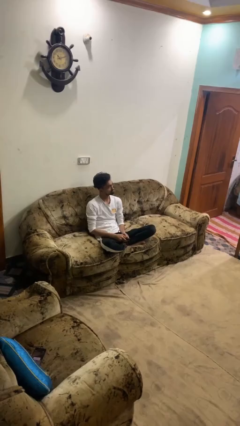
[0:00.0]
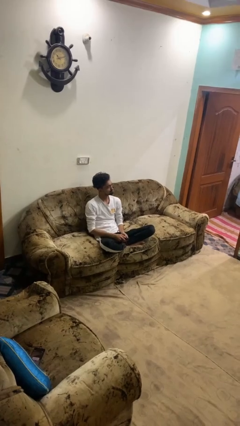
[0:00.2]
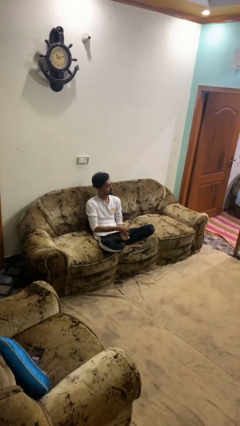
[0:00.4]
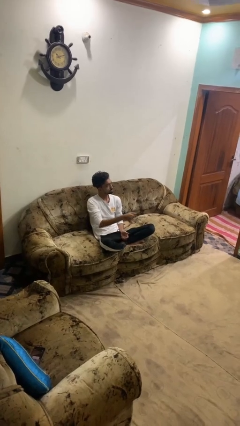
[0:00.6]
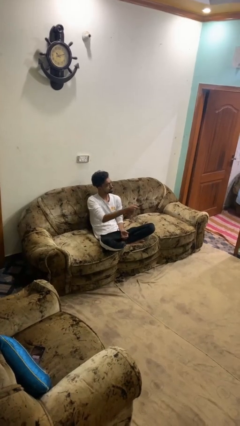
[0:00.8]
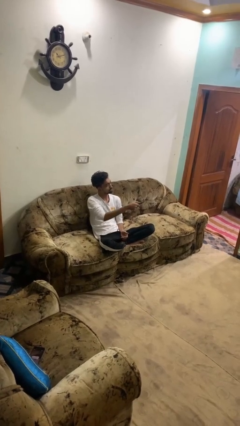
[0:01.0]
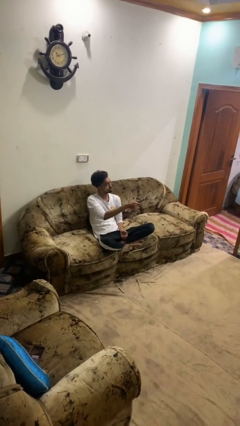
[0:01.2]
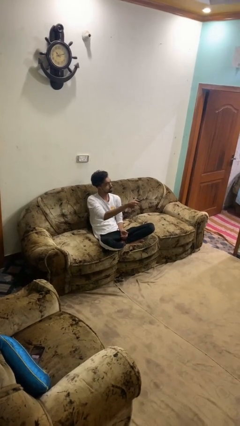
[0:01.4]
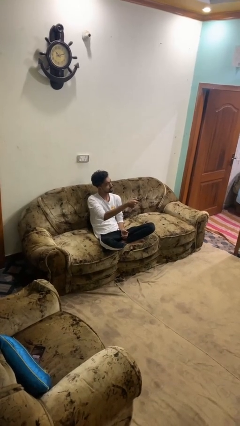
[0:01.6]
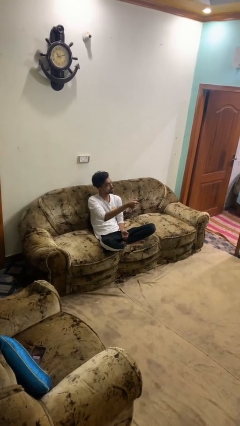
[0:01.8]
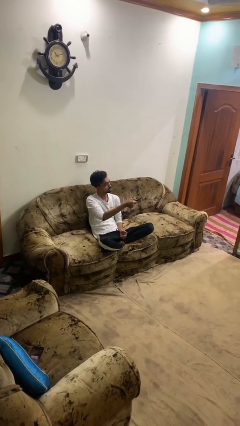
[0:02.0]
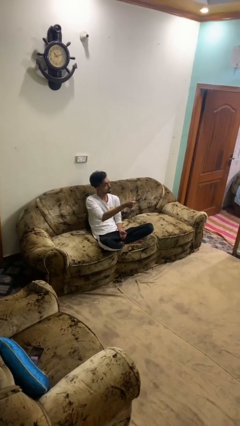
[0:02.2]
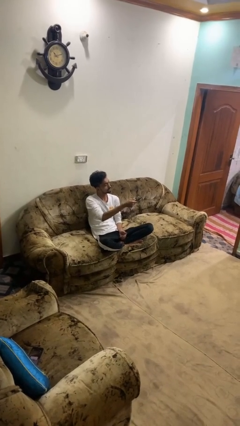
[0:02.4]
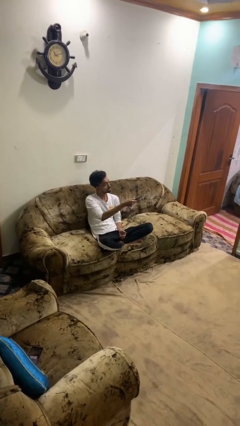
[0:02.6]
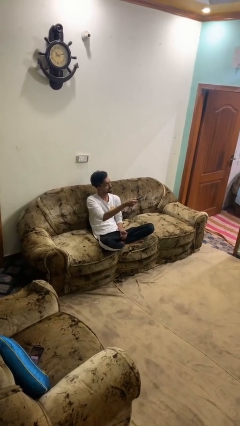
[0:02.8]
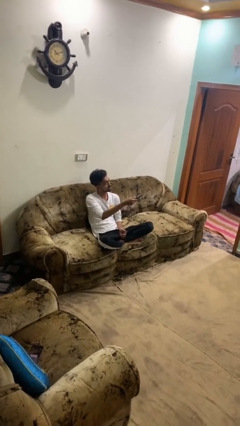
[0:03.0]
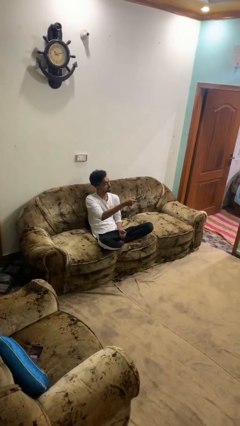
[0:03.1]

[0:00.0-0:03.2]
person uses television remote

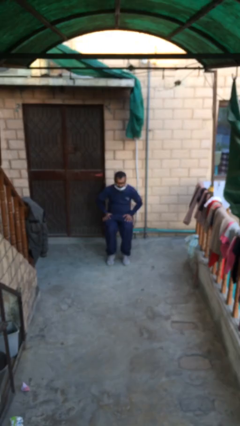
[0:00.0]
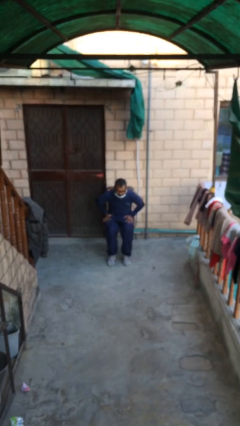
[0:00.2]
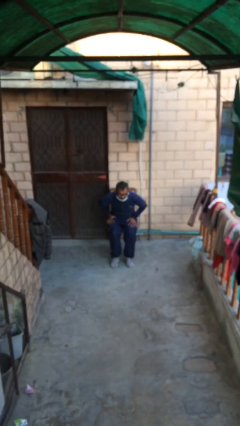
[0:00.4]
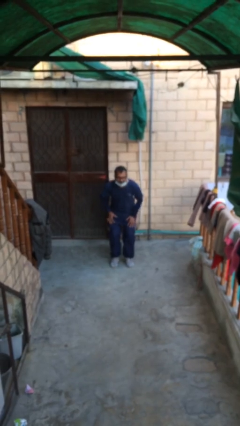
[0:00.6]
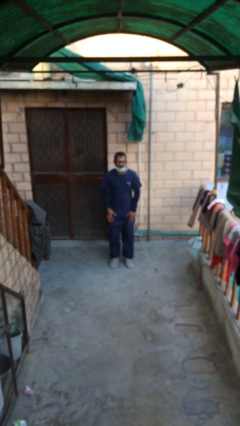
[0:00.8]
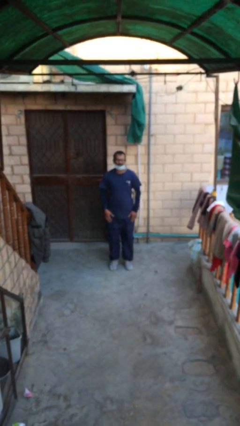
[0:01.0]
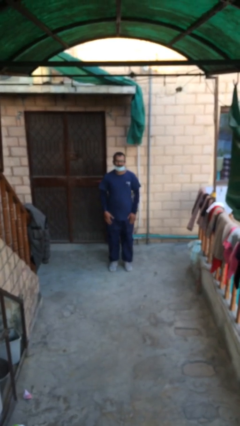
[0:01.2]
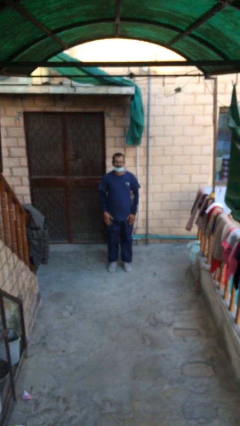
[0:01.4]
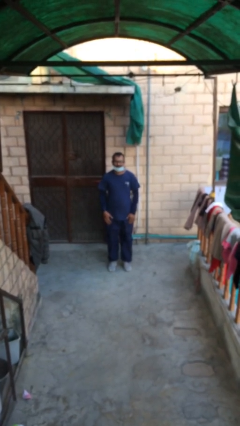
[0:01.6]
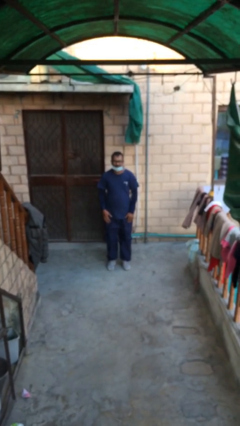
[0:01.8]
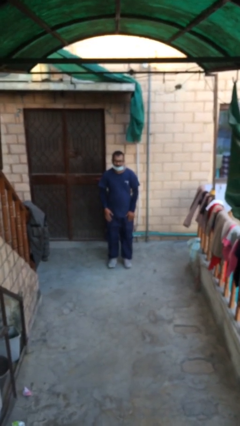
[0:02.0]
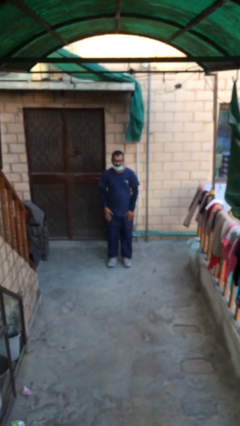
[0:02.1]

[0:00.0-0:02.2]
person stands up

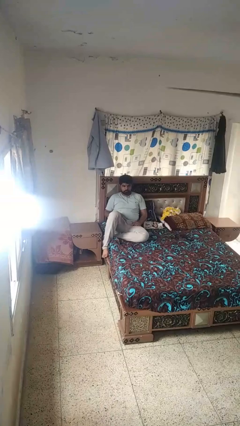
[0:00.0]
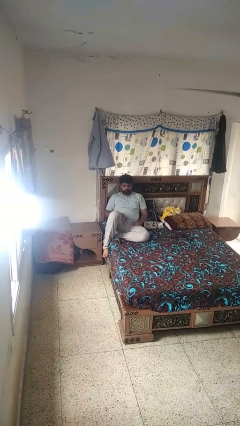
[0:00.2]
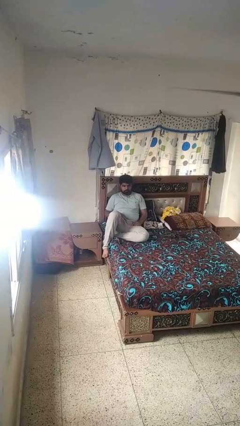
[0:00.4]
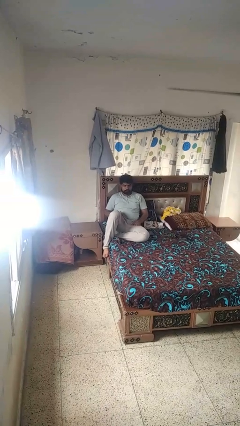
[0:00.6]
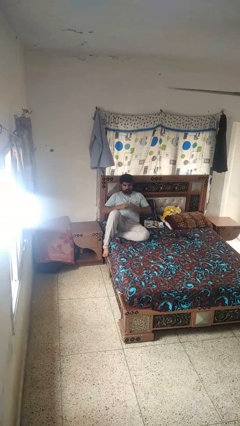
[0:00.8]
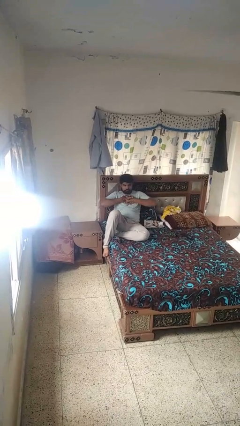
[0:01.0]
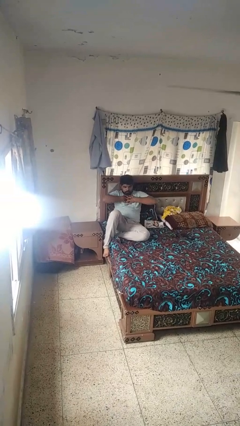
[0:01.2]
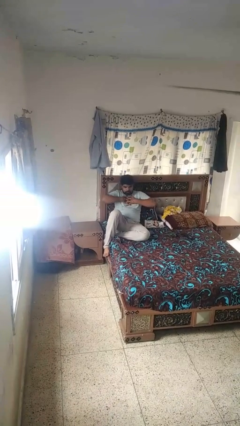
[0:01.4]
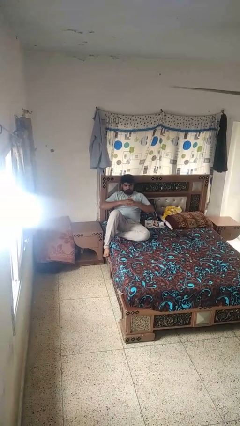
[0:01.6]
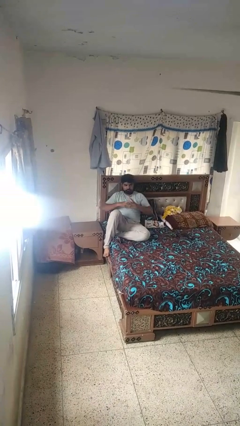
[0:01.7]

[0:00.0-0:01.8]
person cracks knuckles

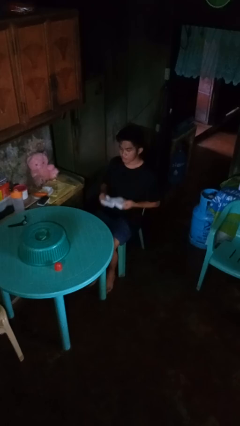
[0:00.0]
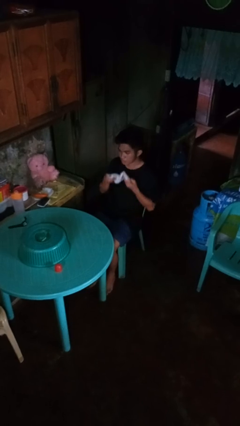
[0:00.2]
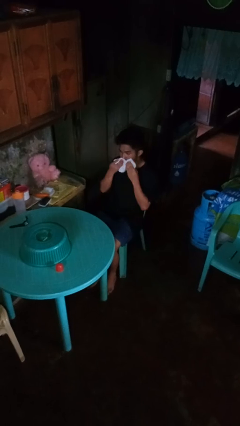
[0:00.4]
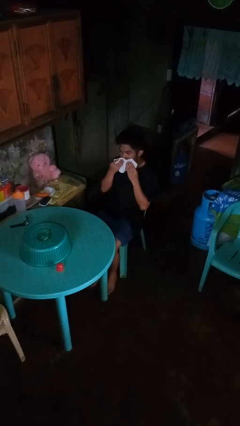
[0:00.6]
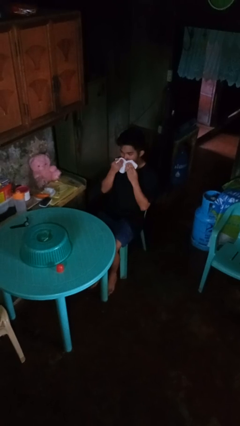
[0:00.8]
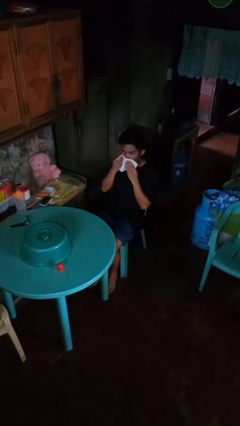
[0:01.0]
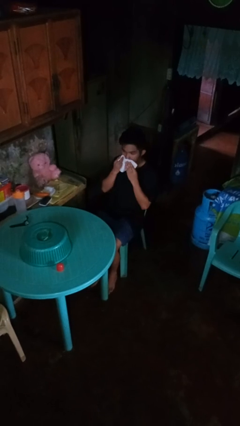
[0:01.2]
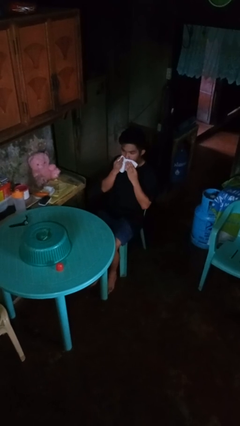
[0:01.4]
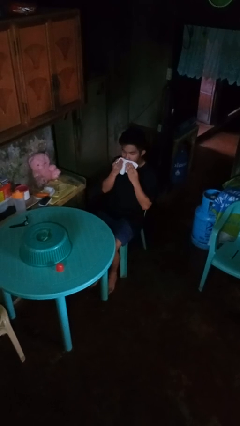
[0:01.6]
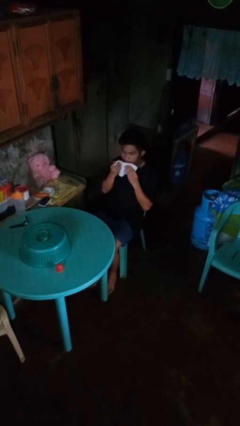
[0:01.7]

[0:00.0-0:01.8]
person wipes mouth with napkin

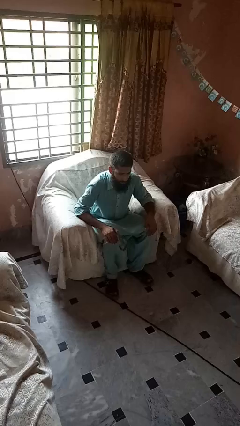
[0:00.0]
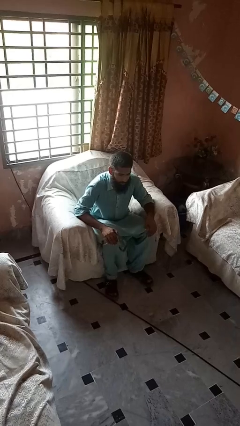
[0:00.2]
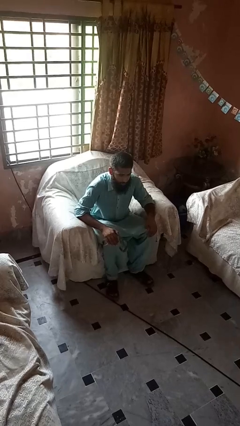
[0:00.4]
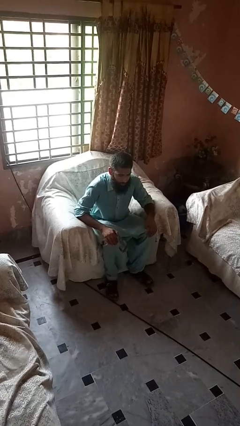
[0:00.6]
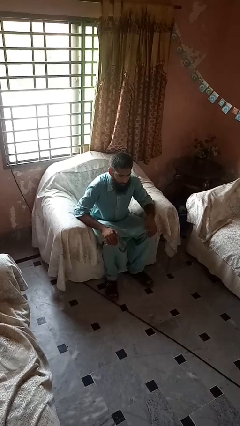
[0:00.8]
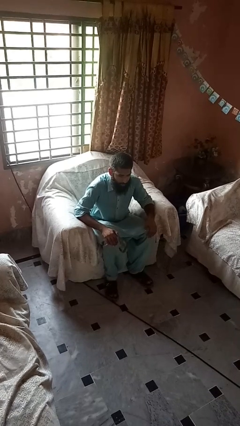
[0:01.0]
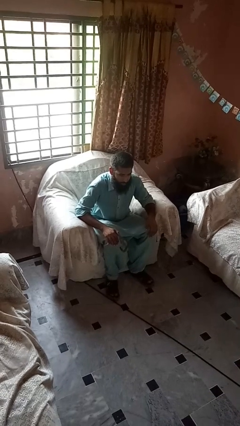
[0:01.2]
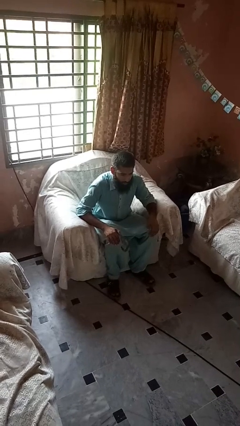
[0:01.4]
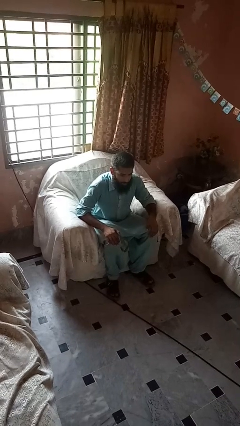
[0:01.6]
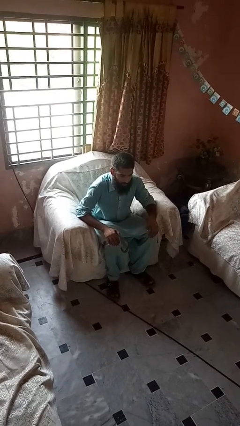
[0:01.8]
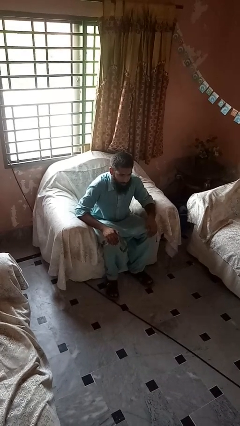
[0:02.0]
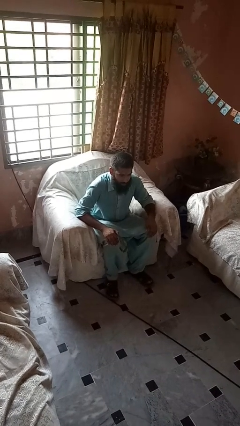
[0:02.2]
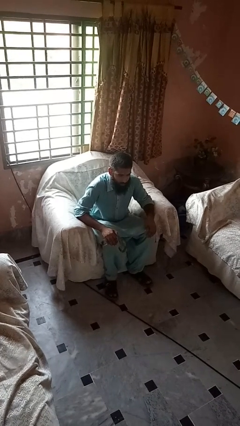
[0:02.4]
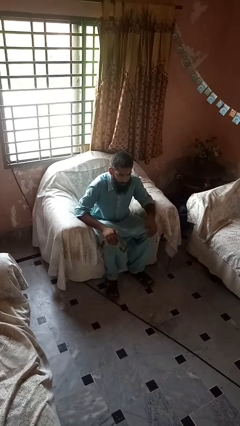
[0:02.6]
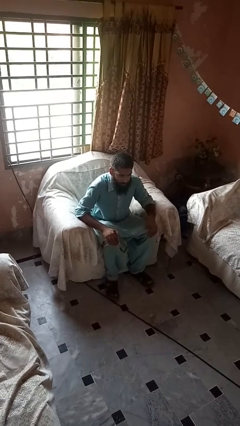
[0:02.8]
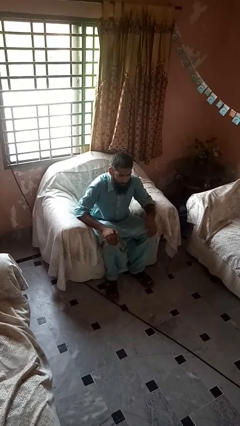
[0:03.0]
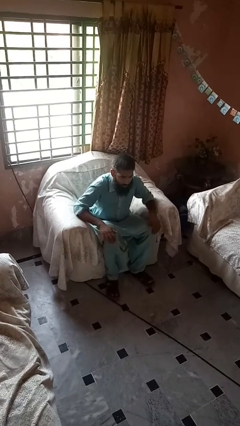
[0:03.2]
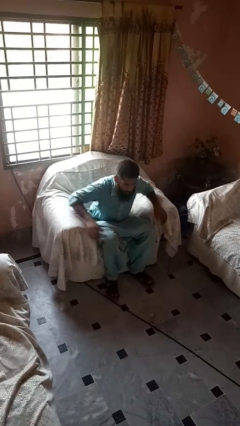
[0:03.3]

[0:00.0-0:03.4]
person falls from chair

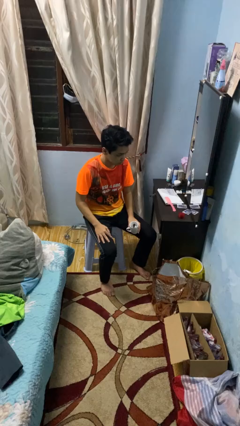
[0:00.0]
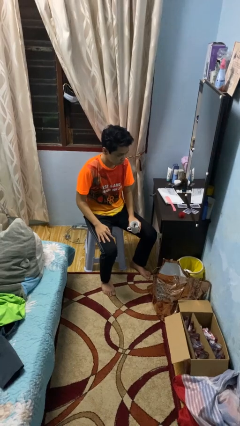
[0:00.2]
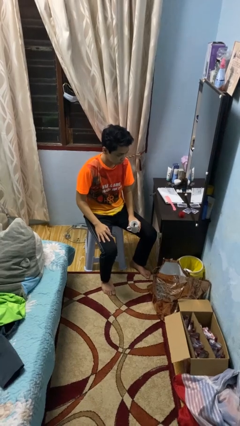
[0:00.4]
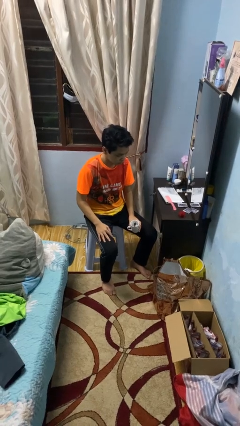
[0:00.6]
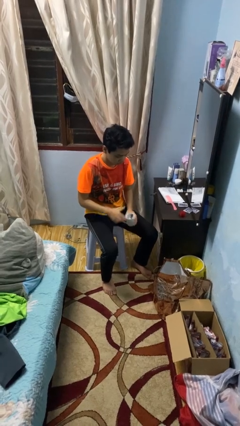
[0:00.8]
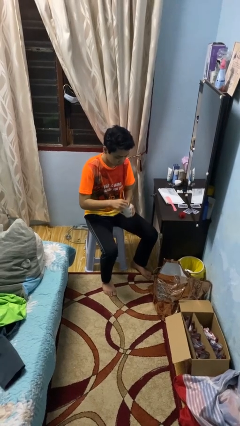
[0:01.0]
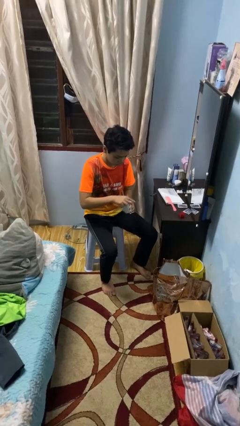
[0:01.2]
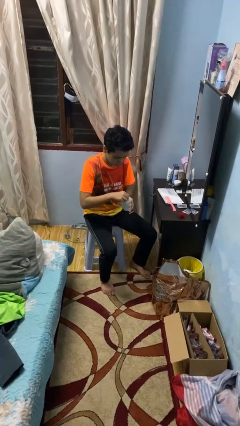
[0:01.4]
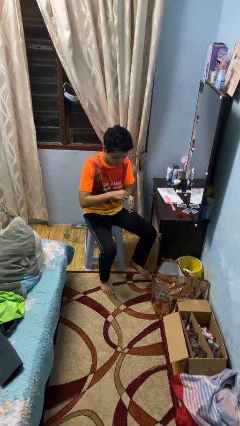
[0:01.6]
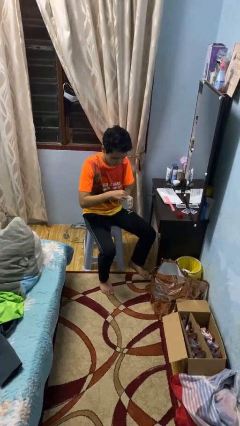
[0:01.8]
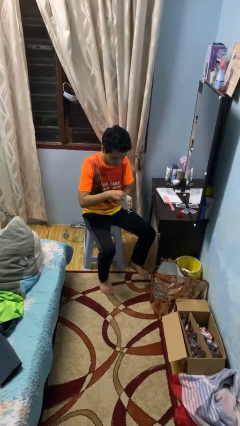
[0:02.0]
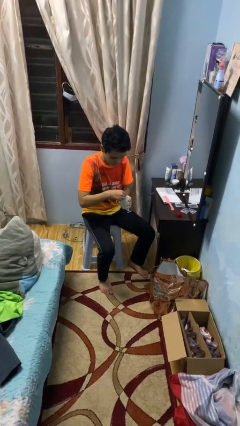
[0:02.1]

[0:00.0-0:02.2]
person stirs mug

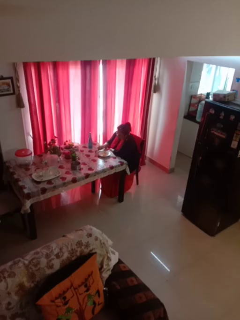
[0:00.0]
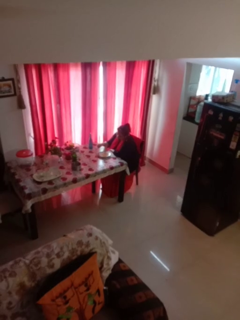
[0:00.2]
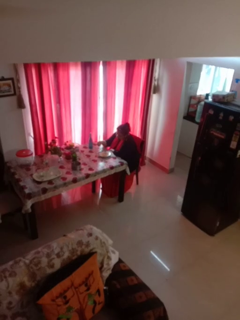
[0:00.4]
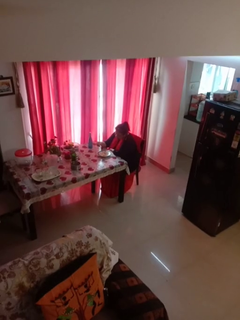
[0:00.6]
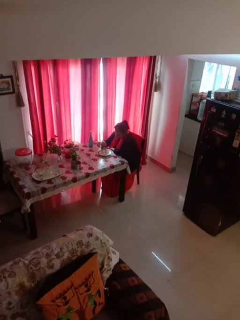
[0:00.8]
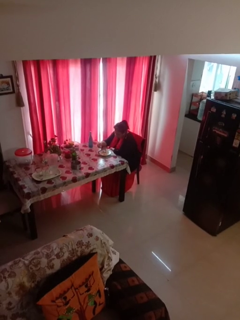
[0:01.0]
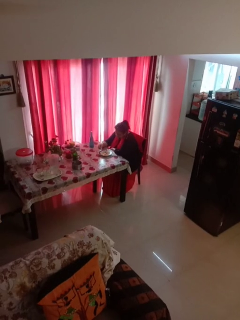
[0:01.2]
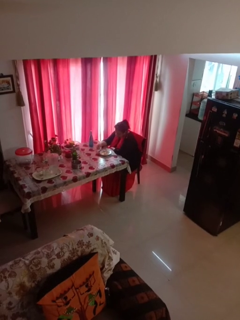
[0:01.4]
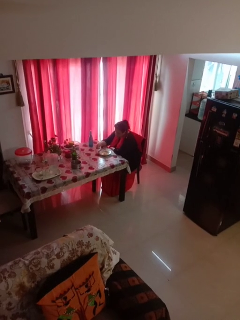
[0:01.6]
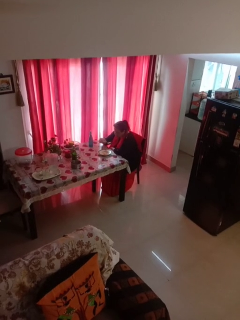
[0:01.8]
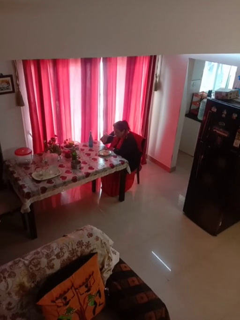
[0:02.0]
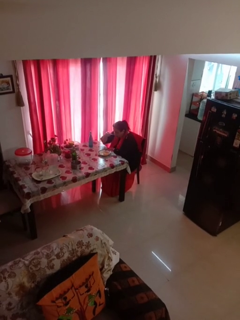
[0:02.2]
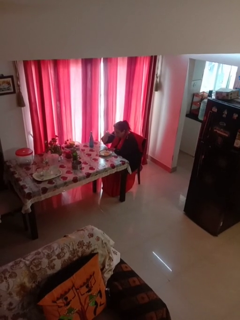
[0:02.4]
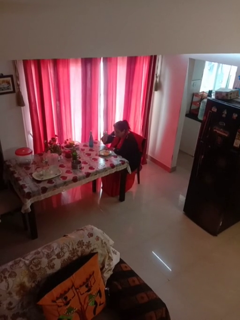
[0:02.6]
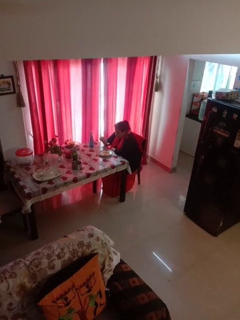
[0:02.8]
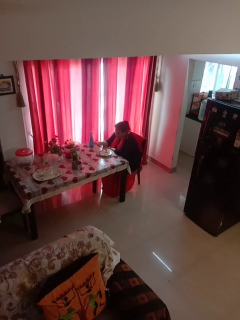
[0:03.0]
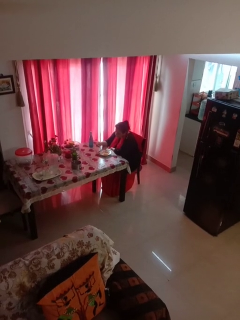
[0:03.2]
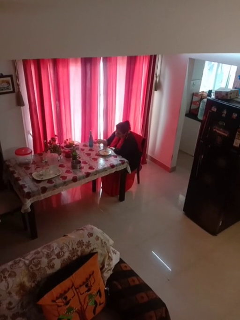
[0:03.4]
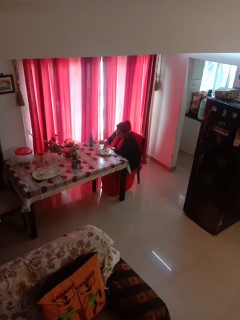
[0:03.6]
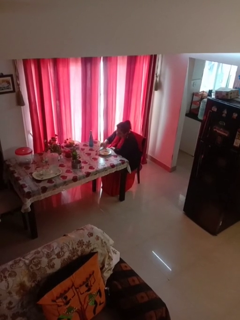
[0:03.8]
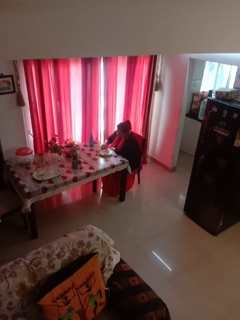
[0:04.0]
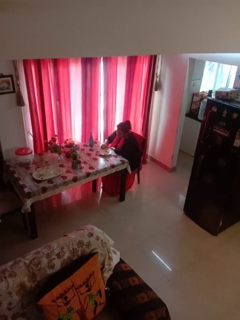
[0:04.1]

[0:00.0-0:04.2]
person eats with utensil
